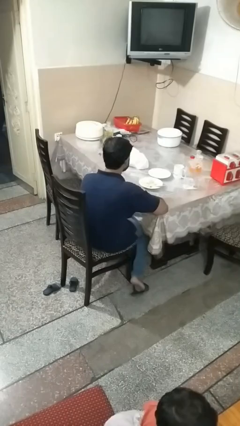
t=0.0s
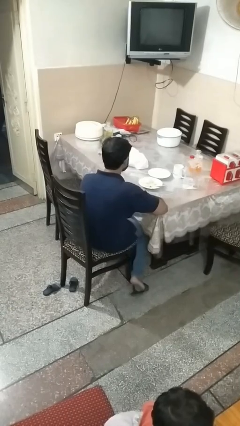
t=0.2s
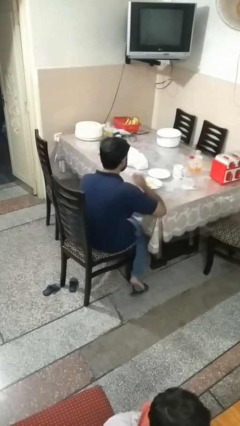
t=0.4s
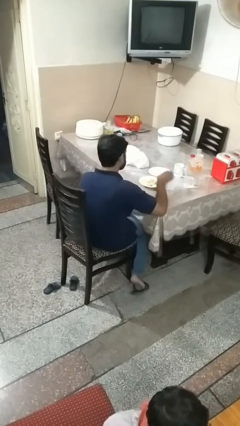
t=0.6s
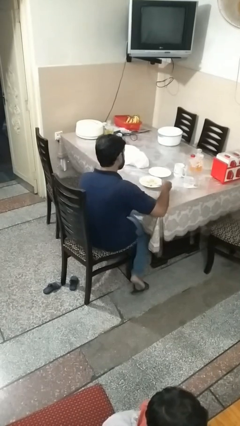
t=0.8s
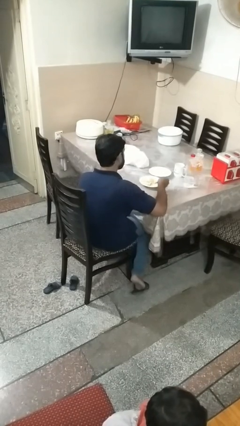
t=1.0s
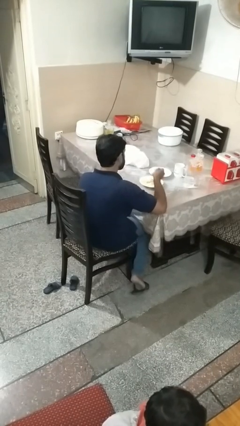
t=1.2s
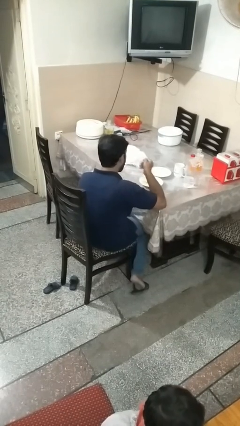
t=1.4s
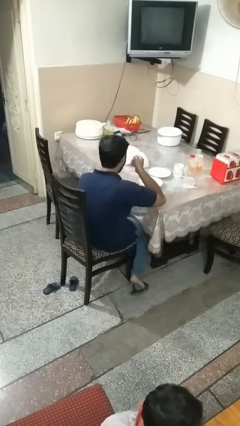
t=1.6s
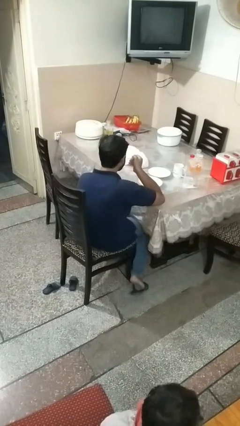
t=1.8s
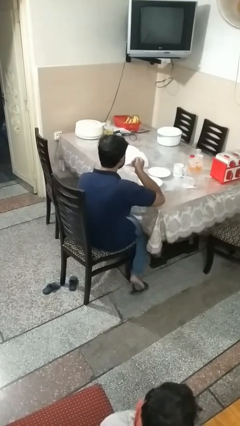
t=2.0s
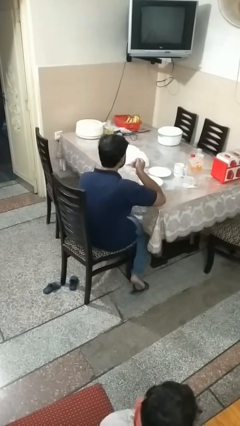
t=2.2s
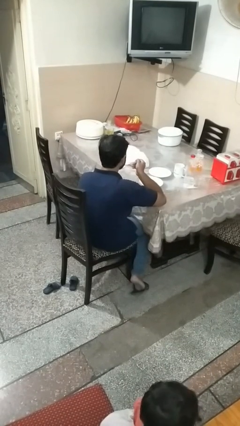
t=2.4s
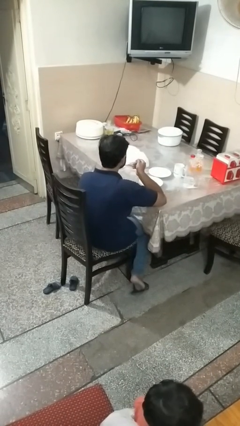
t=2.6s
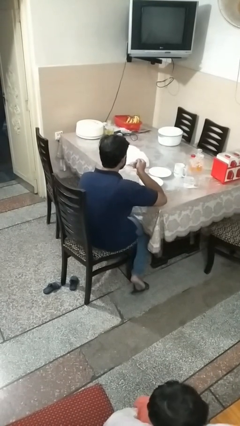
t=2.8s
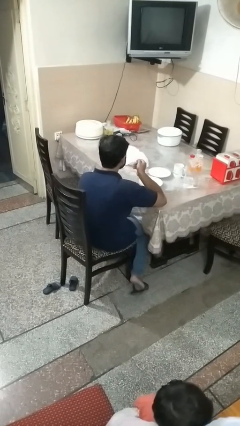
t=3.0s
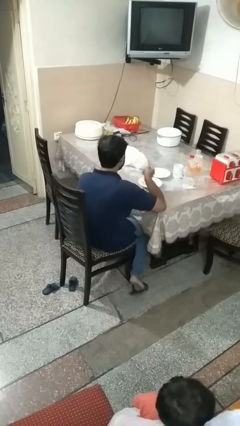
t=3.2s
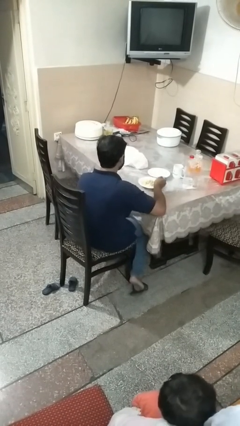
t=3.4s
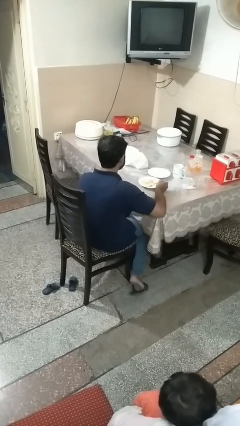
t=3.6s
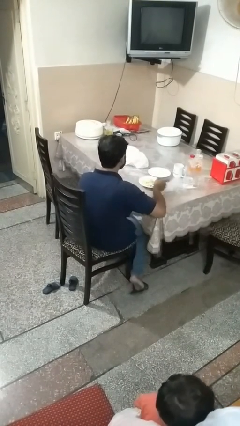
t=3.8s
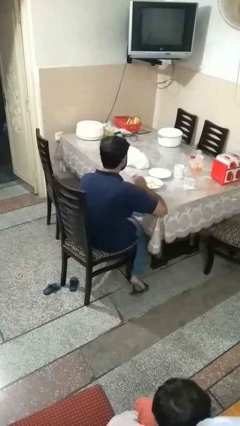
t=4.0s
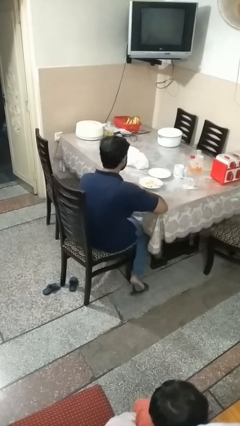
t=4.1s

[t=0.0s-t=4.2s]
person eats with utensil

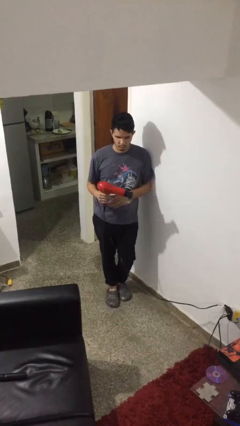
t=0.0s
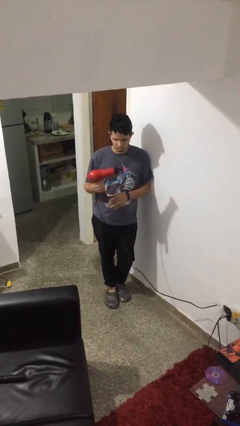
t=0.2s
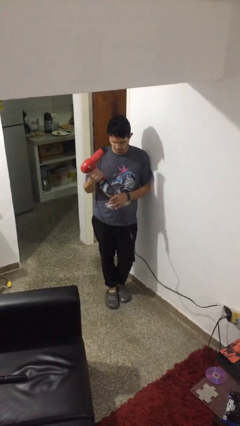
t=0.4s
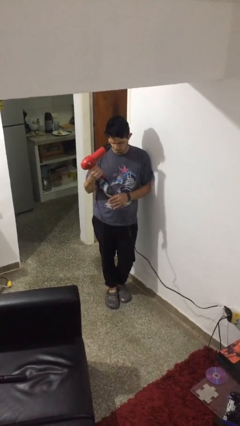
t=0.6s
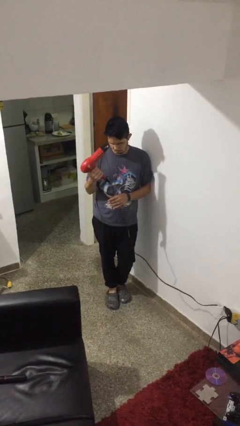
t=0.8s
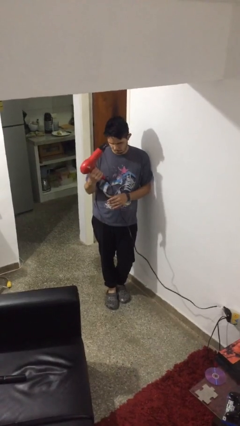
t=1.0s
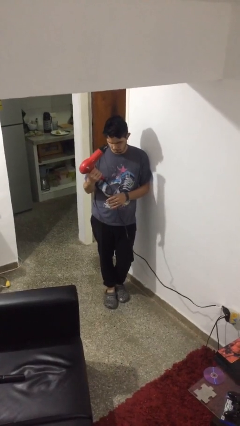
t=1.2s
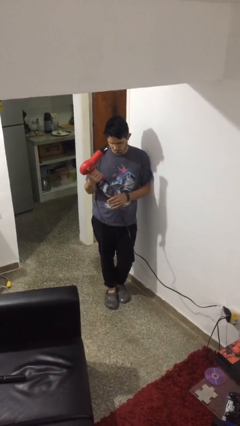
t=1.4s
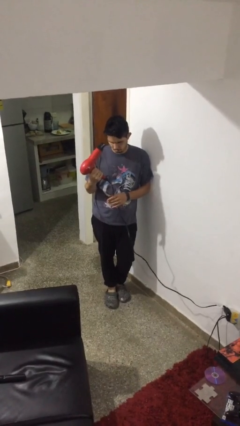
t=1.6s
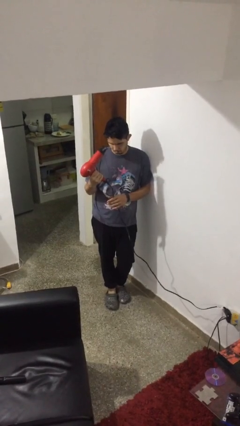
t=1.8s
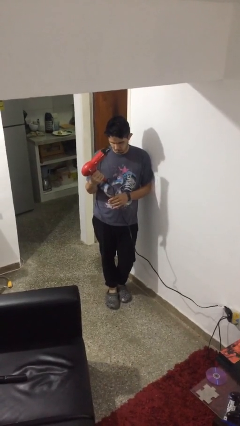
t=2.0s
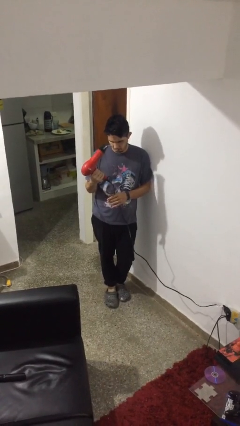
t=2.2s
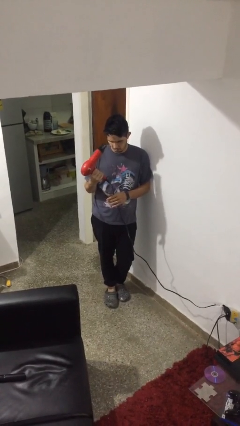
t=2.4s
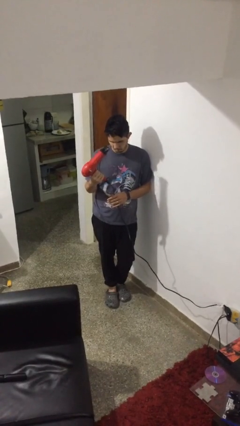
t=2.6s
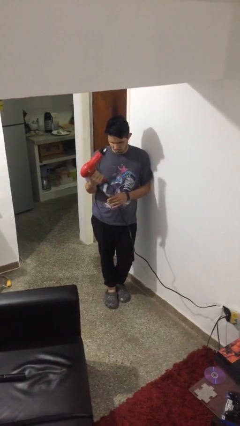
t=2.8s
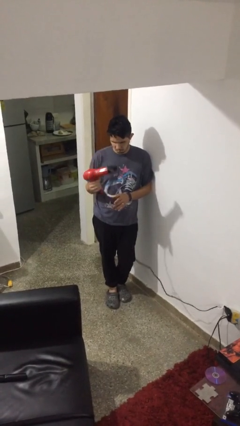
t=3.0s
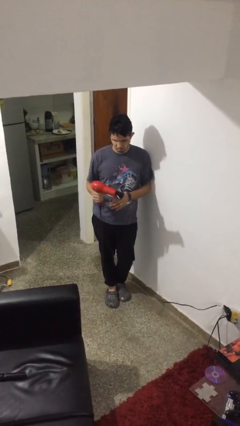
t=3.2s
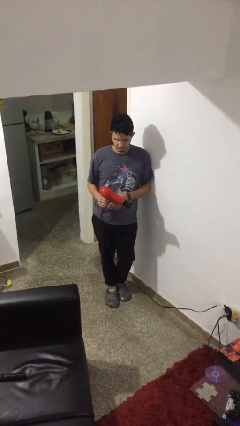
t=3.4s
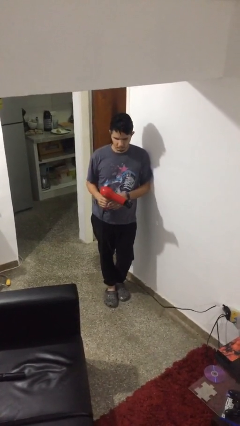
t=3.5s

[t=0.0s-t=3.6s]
person dries hair with hairdryer

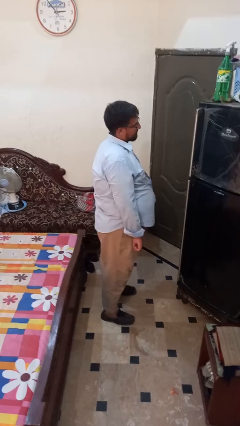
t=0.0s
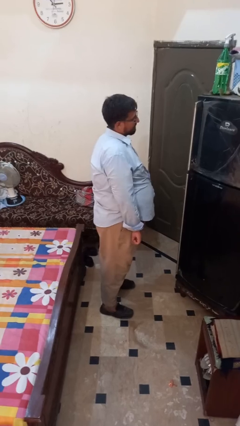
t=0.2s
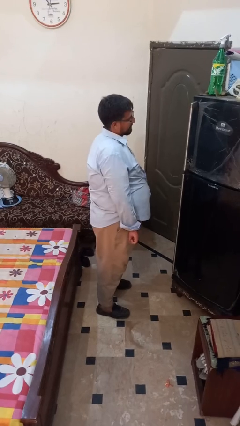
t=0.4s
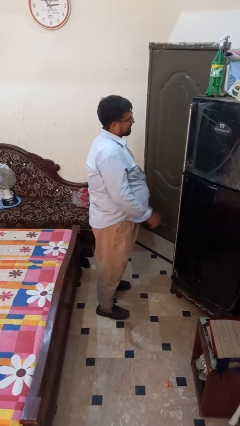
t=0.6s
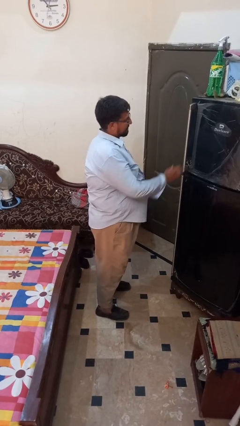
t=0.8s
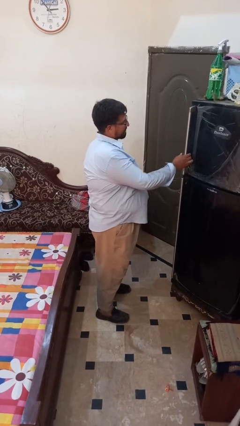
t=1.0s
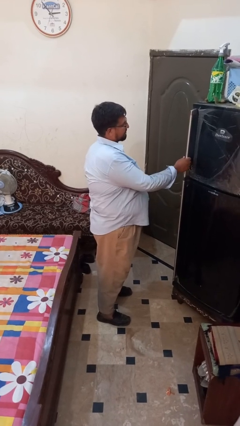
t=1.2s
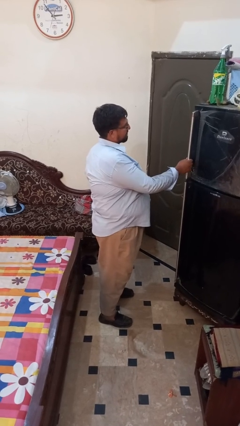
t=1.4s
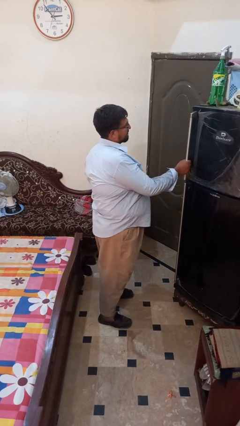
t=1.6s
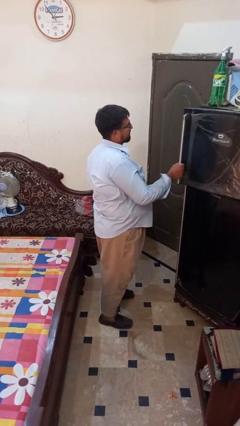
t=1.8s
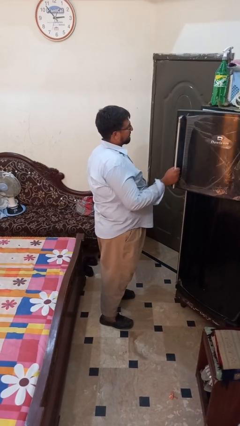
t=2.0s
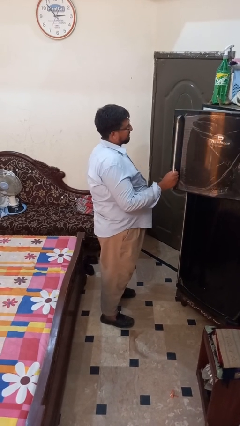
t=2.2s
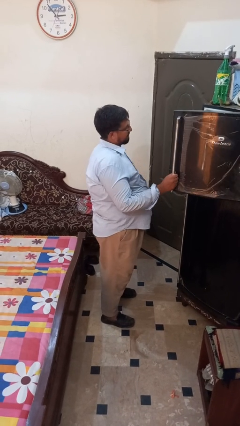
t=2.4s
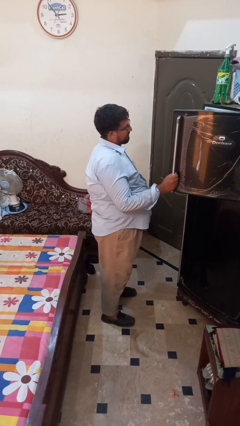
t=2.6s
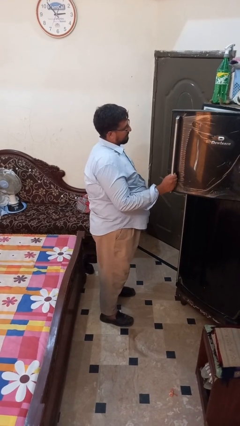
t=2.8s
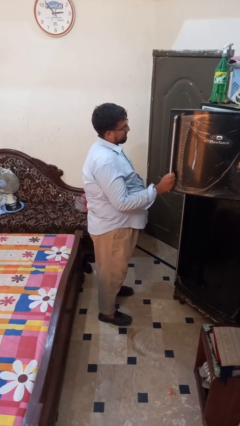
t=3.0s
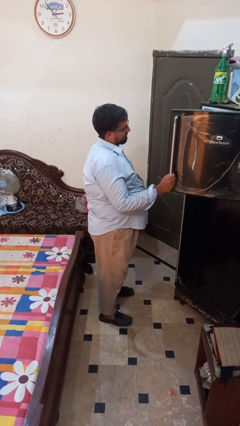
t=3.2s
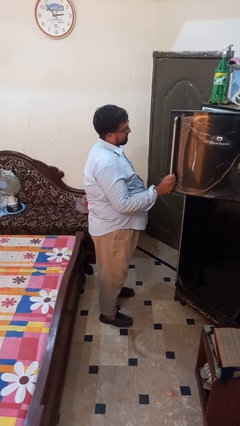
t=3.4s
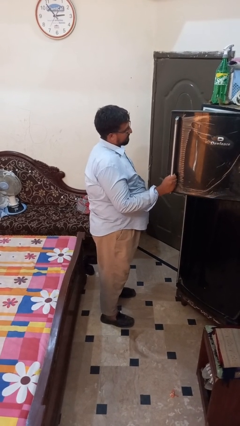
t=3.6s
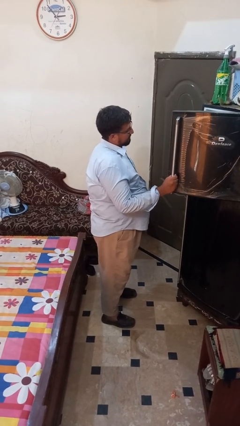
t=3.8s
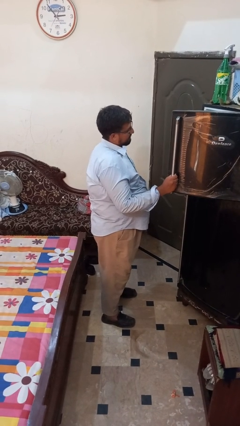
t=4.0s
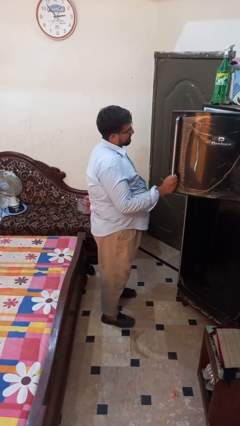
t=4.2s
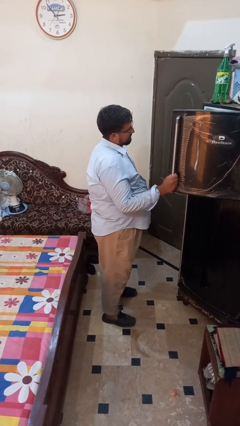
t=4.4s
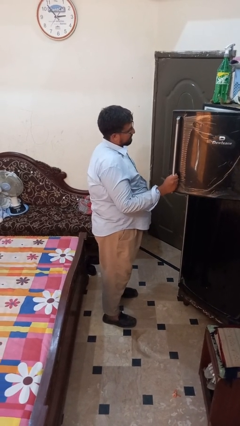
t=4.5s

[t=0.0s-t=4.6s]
person opens refrigerator

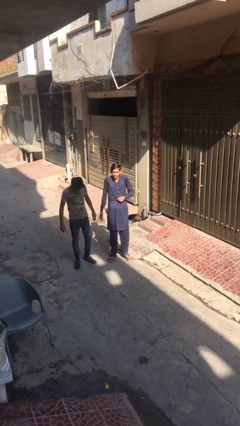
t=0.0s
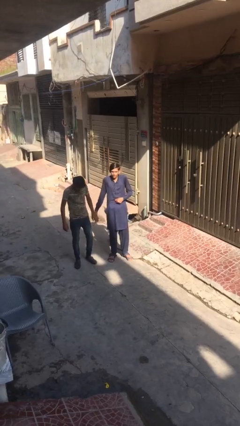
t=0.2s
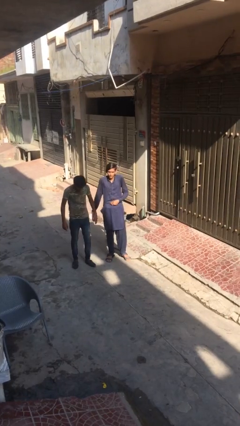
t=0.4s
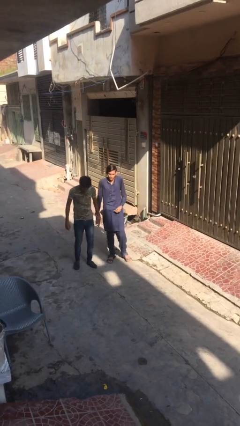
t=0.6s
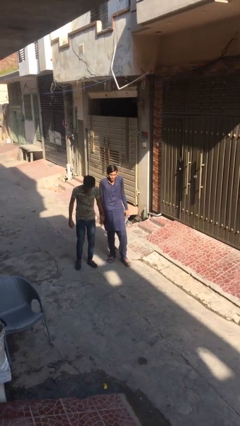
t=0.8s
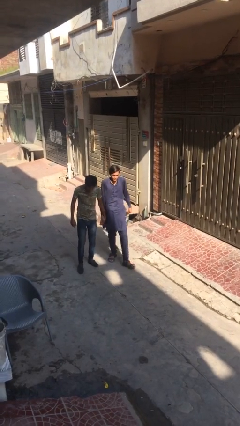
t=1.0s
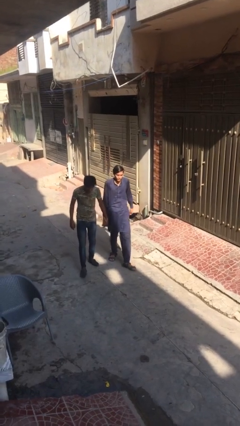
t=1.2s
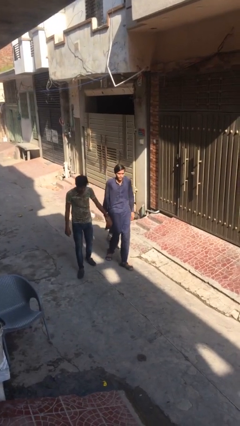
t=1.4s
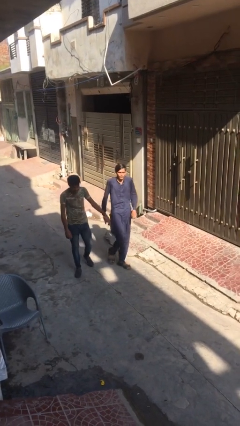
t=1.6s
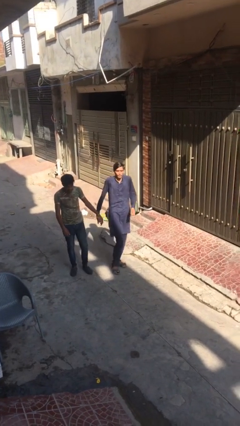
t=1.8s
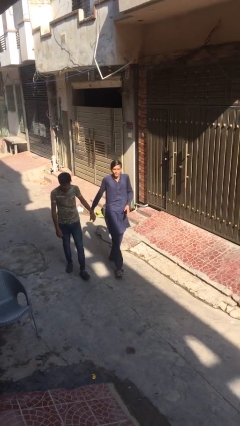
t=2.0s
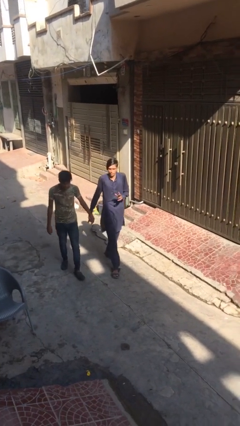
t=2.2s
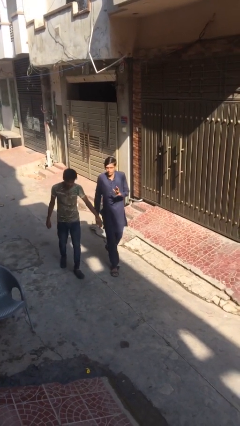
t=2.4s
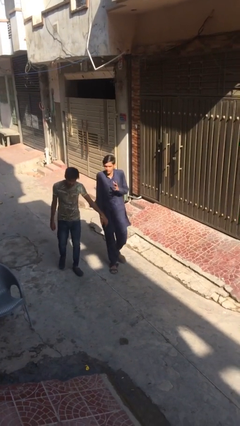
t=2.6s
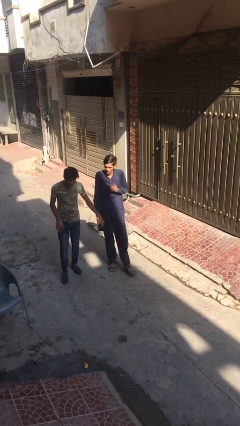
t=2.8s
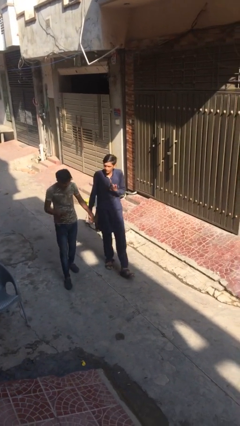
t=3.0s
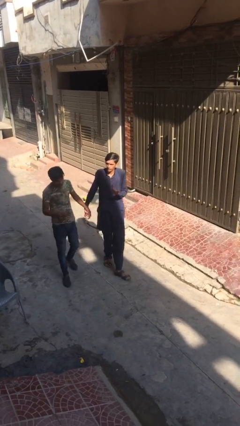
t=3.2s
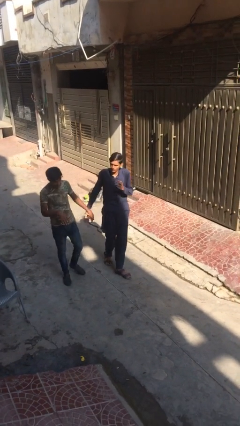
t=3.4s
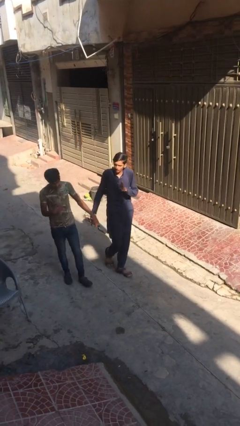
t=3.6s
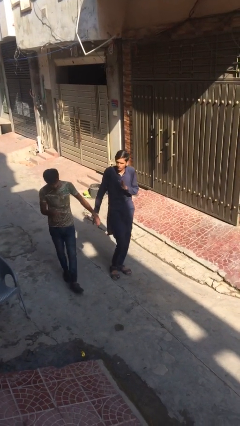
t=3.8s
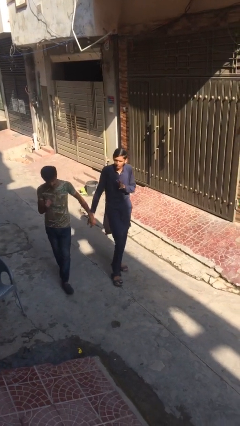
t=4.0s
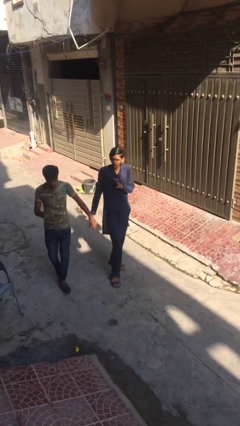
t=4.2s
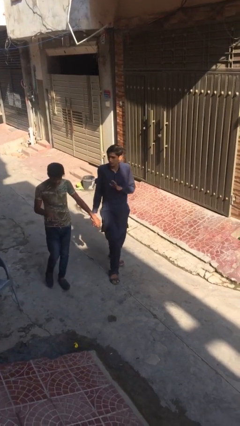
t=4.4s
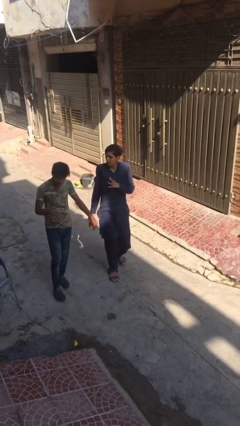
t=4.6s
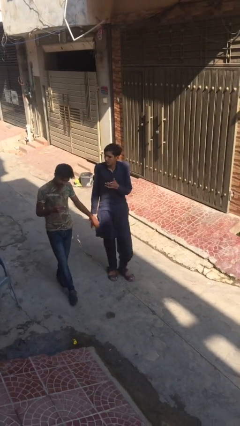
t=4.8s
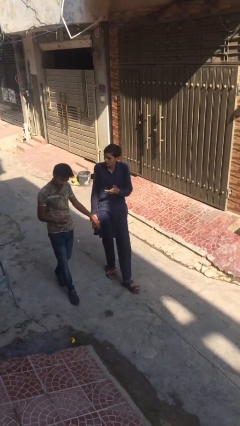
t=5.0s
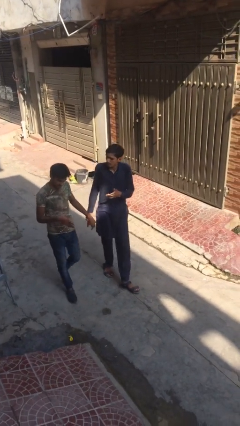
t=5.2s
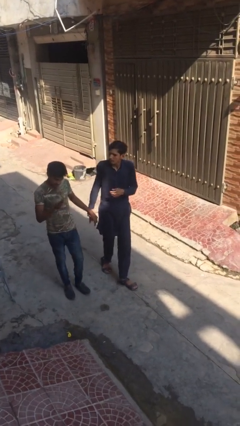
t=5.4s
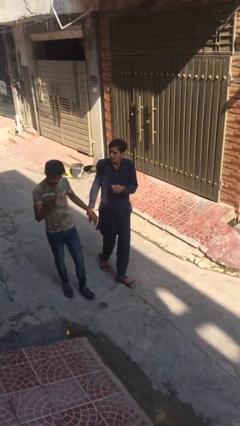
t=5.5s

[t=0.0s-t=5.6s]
person holds hand

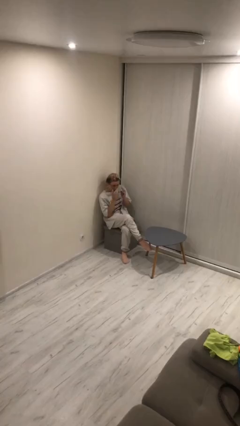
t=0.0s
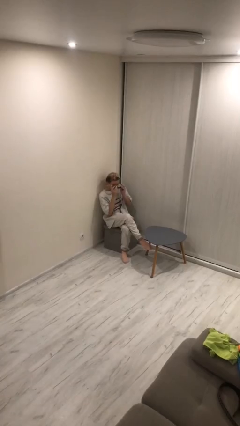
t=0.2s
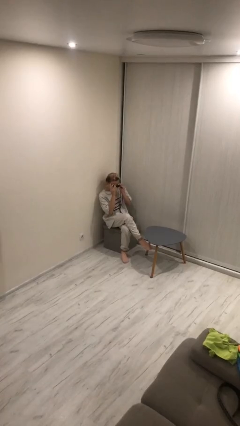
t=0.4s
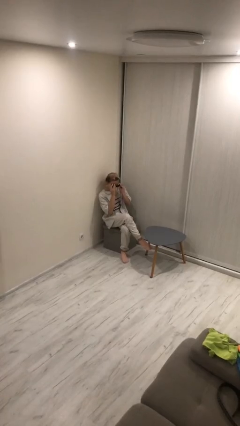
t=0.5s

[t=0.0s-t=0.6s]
person puts on sunglasses
